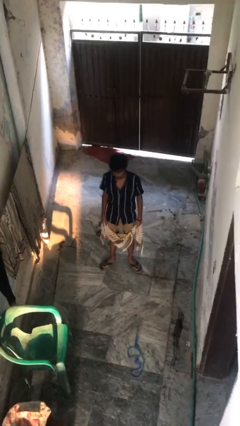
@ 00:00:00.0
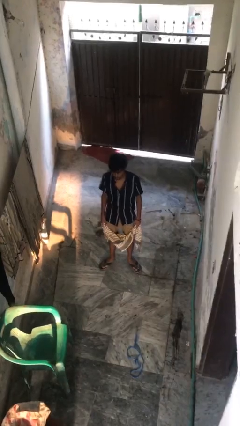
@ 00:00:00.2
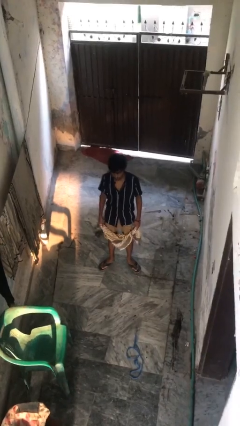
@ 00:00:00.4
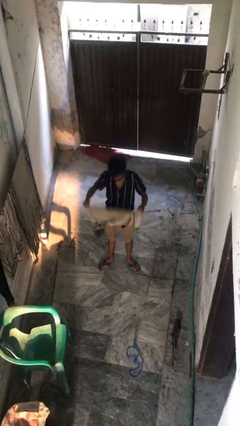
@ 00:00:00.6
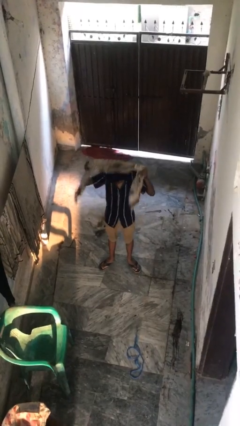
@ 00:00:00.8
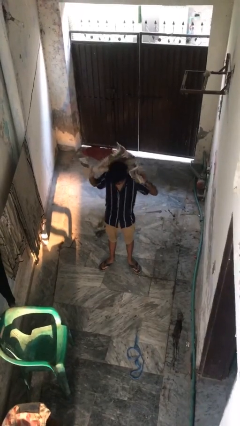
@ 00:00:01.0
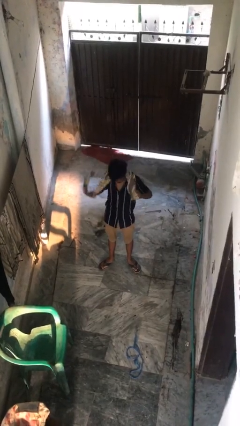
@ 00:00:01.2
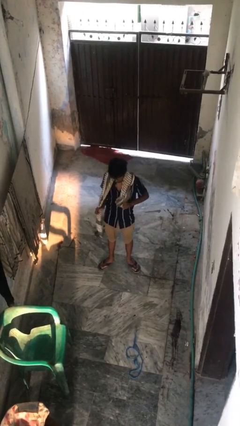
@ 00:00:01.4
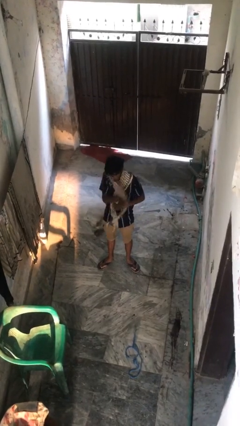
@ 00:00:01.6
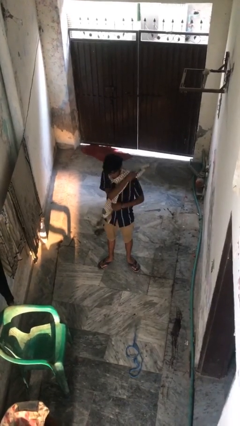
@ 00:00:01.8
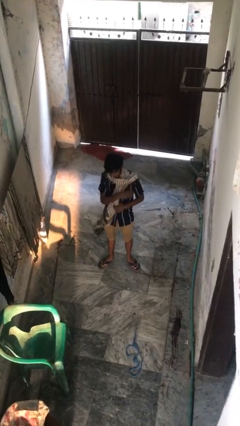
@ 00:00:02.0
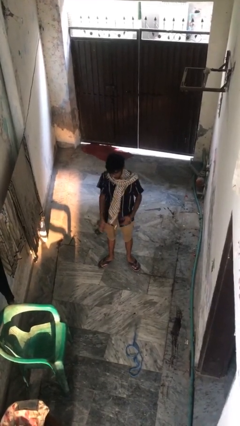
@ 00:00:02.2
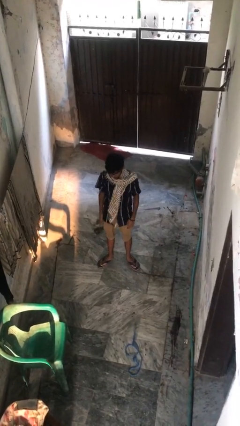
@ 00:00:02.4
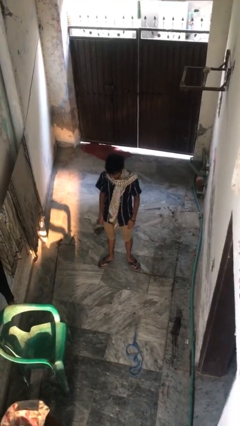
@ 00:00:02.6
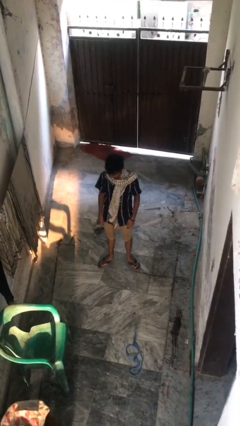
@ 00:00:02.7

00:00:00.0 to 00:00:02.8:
person puts on scarf

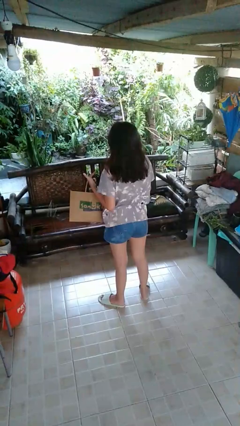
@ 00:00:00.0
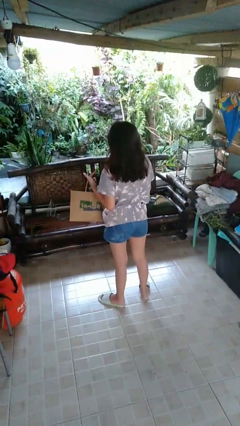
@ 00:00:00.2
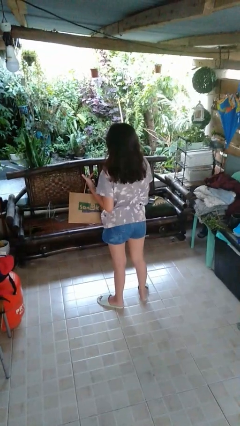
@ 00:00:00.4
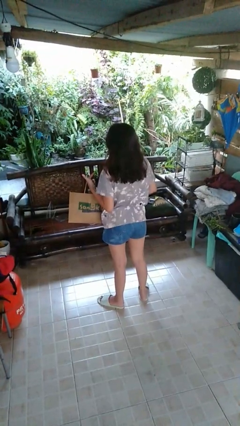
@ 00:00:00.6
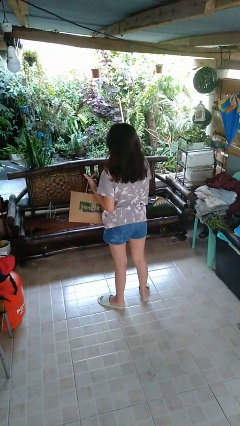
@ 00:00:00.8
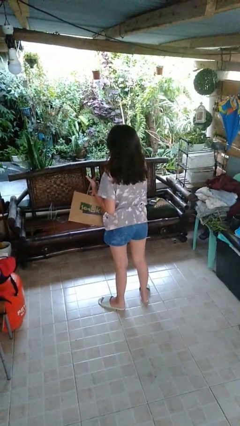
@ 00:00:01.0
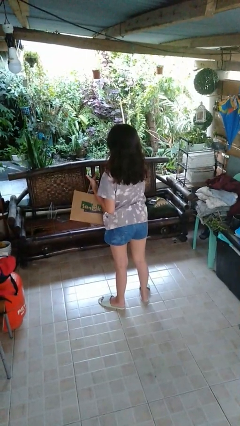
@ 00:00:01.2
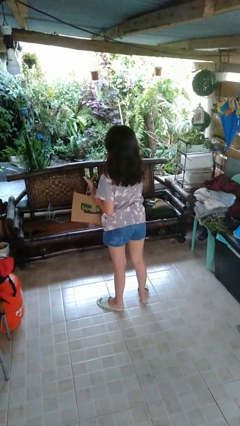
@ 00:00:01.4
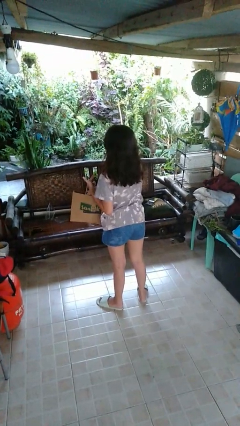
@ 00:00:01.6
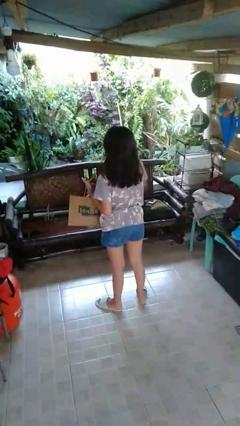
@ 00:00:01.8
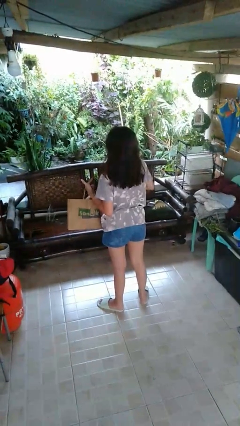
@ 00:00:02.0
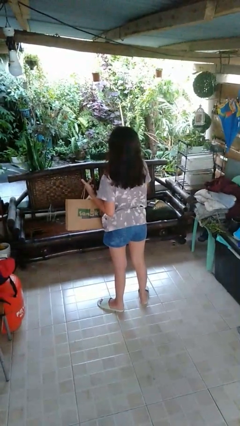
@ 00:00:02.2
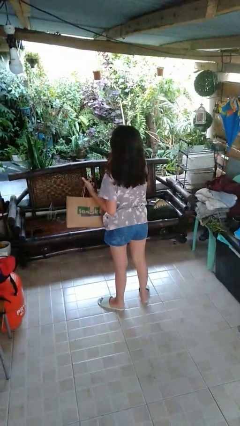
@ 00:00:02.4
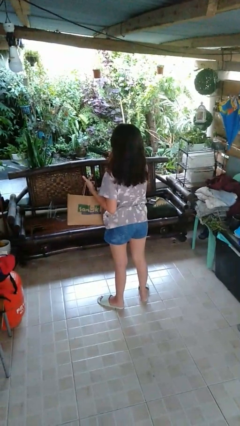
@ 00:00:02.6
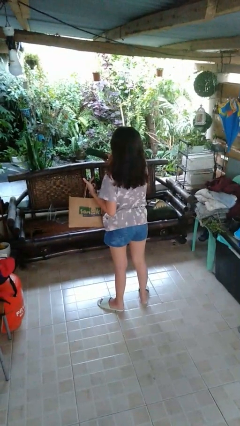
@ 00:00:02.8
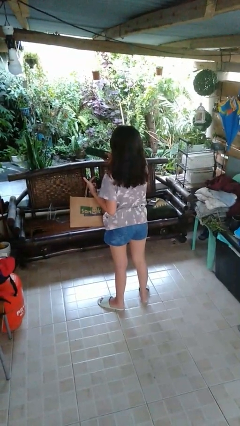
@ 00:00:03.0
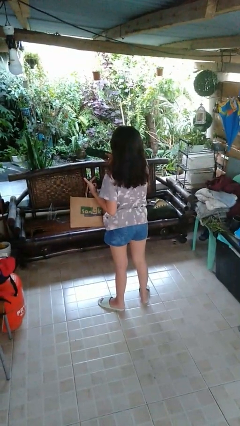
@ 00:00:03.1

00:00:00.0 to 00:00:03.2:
person takes object from bag

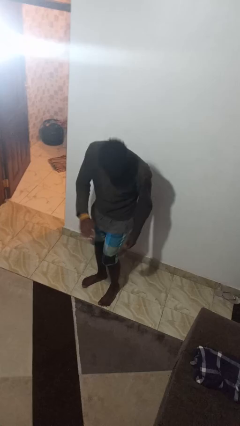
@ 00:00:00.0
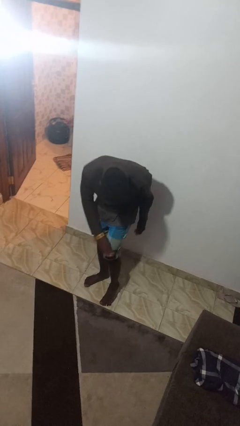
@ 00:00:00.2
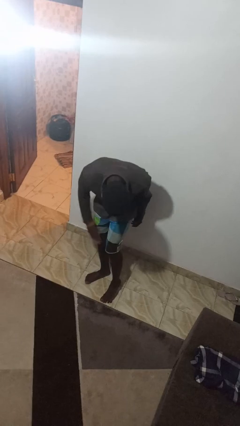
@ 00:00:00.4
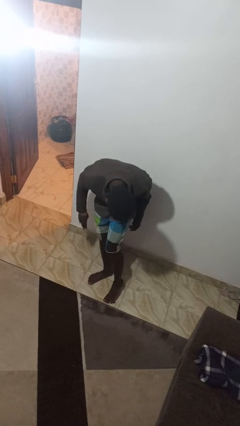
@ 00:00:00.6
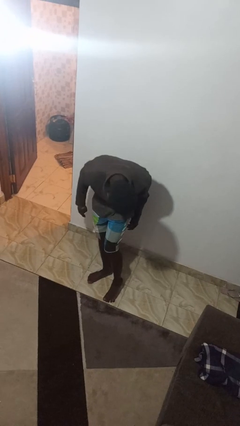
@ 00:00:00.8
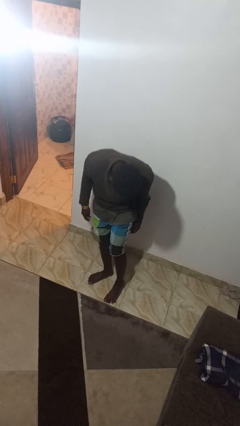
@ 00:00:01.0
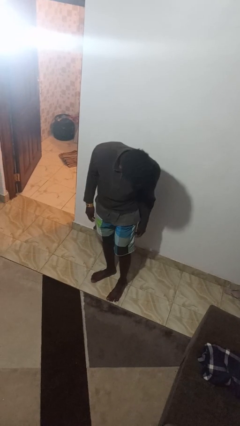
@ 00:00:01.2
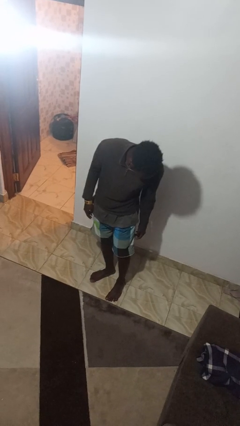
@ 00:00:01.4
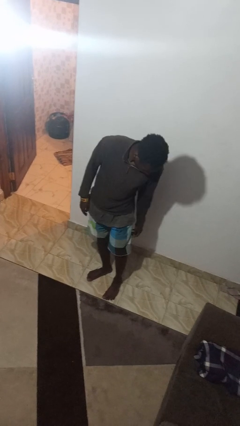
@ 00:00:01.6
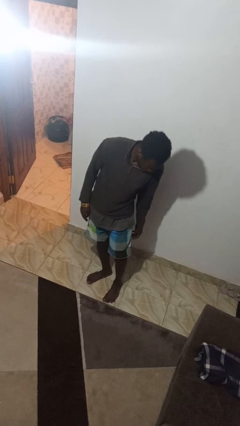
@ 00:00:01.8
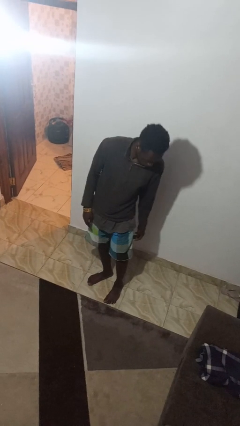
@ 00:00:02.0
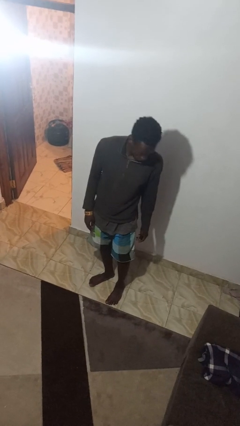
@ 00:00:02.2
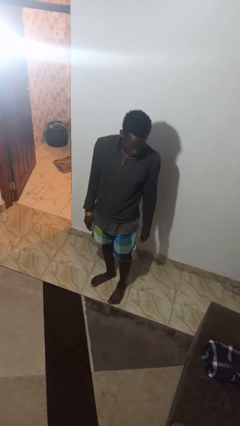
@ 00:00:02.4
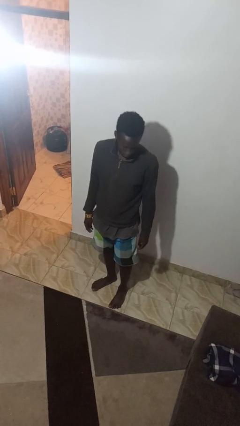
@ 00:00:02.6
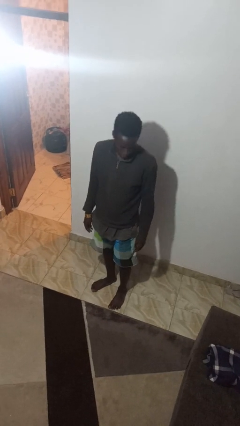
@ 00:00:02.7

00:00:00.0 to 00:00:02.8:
person swats bug

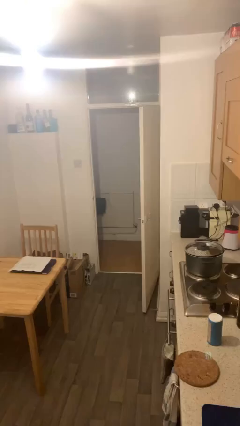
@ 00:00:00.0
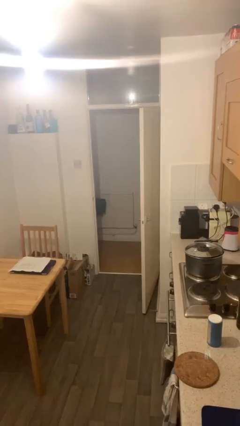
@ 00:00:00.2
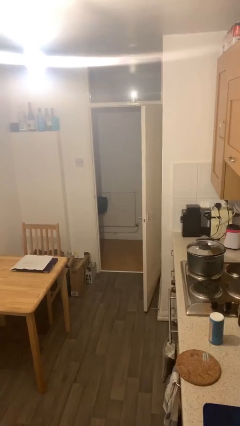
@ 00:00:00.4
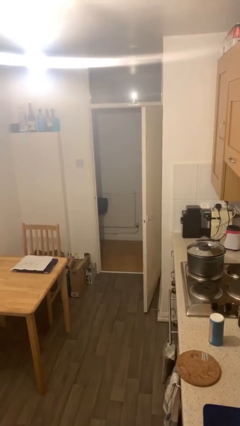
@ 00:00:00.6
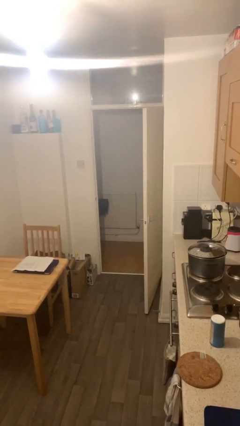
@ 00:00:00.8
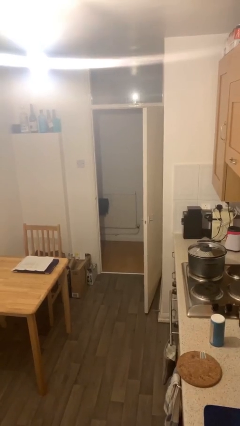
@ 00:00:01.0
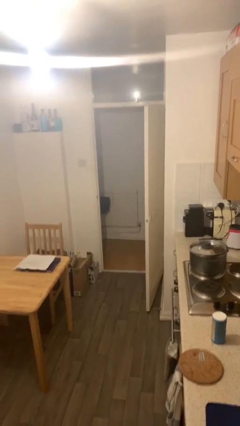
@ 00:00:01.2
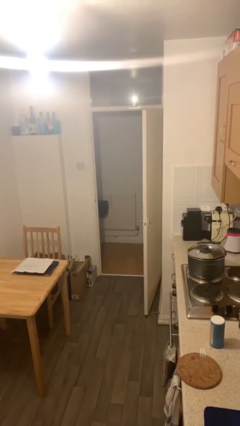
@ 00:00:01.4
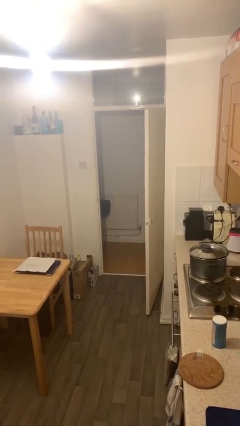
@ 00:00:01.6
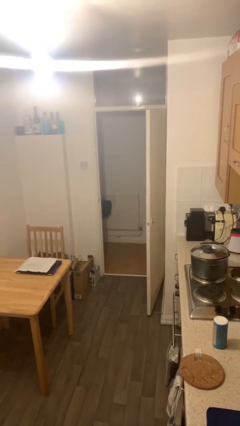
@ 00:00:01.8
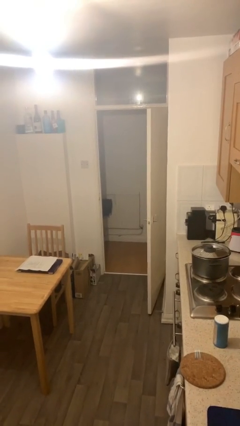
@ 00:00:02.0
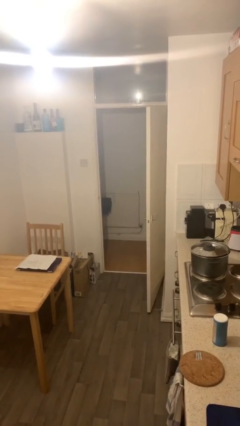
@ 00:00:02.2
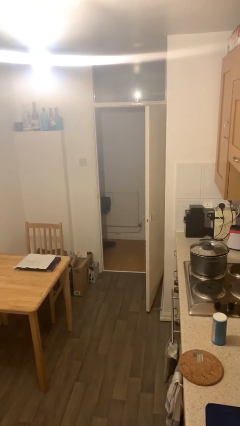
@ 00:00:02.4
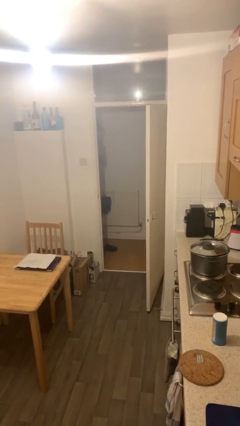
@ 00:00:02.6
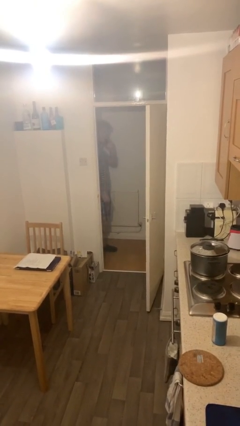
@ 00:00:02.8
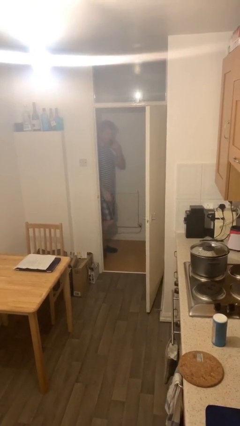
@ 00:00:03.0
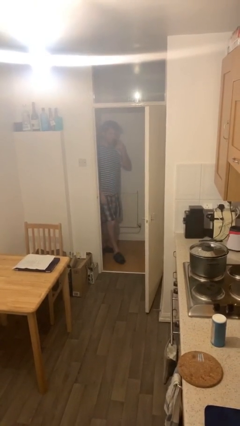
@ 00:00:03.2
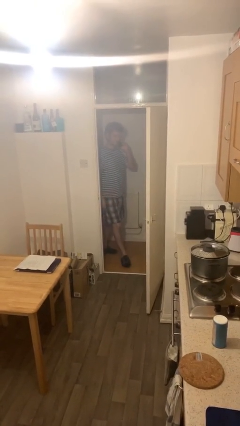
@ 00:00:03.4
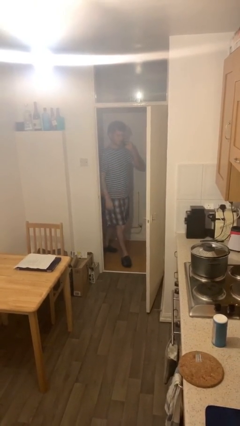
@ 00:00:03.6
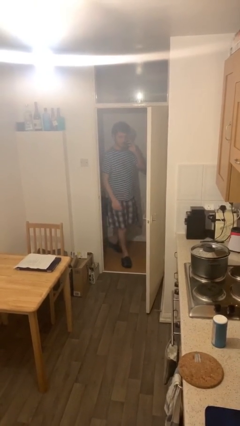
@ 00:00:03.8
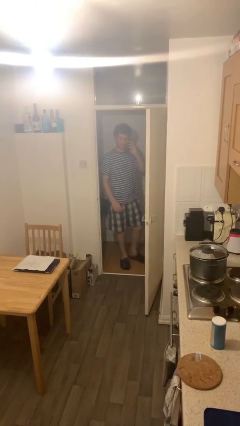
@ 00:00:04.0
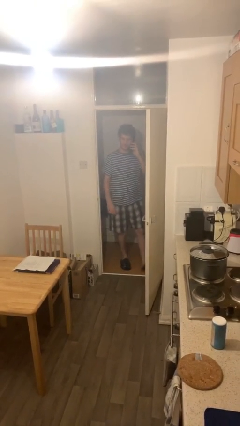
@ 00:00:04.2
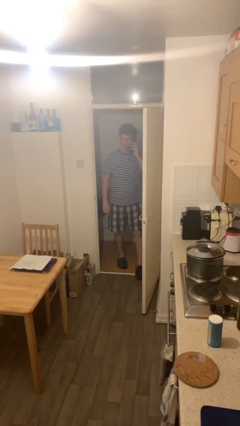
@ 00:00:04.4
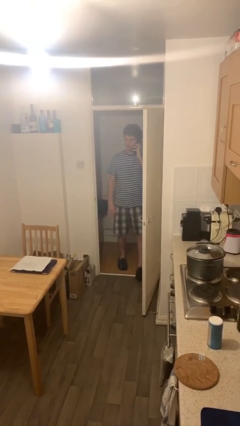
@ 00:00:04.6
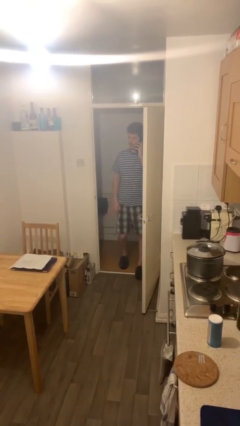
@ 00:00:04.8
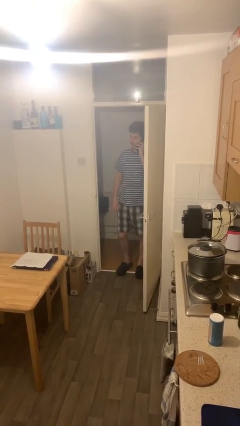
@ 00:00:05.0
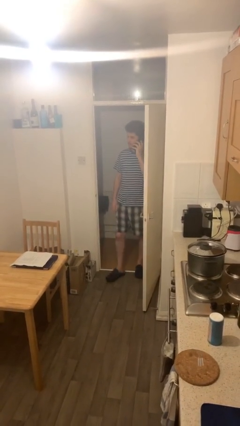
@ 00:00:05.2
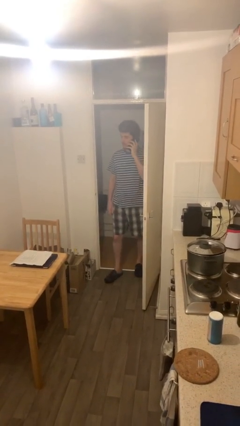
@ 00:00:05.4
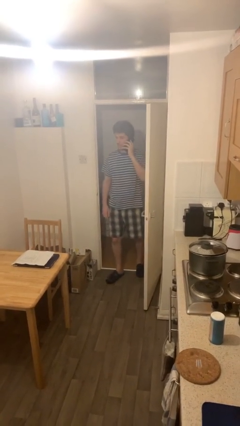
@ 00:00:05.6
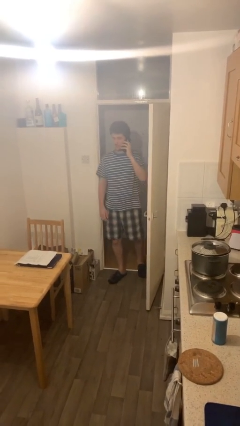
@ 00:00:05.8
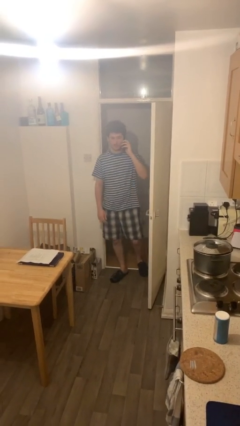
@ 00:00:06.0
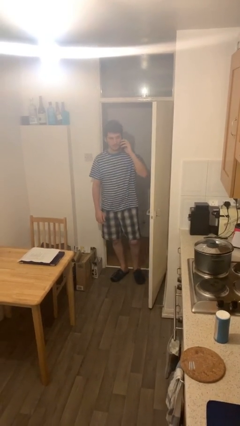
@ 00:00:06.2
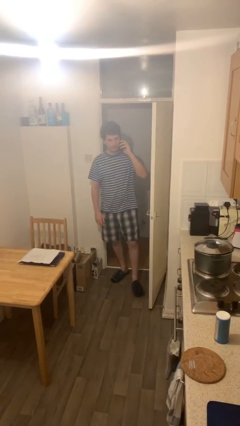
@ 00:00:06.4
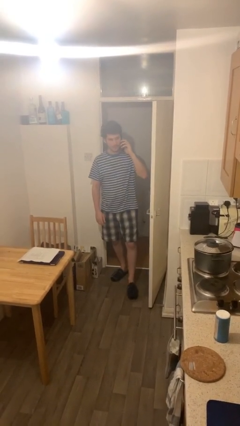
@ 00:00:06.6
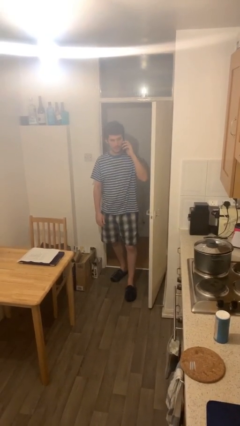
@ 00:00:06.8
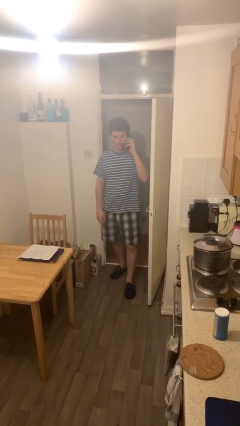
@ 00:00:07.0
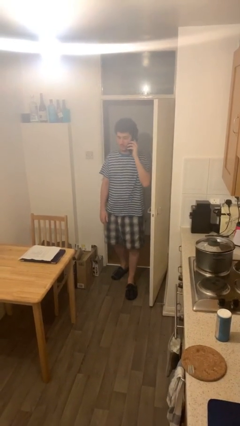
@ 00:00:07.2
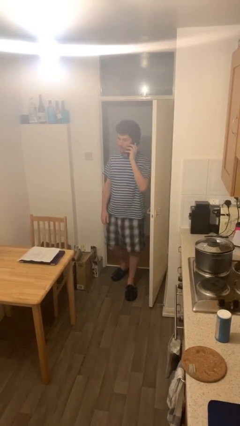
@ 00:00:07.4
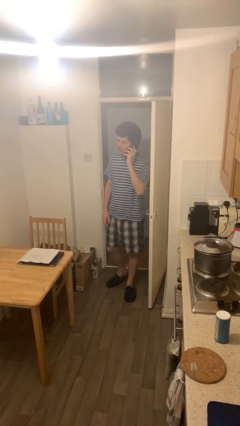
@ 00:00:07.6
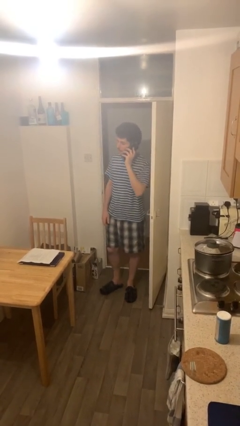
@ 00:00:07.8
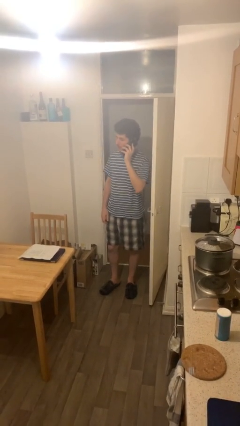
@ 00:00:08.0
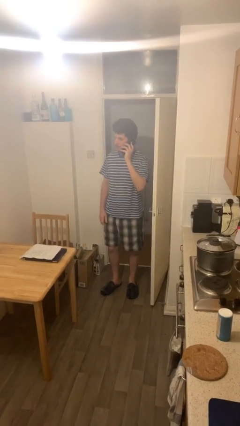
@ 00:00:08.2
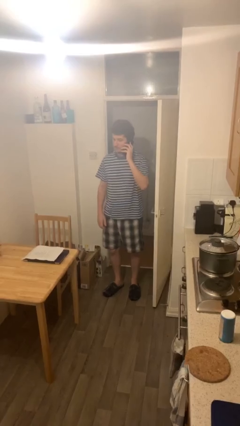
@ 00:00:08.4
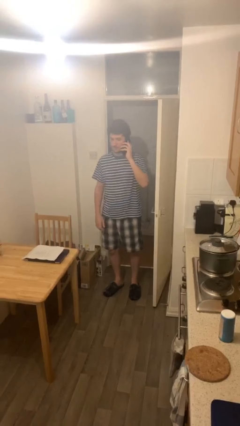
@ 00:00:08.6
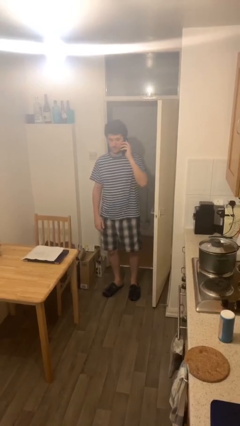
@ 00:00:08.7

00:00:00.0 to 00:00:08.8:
person enters scene through structure
